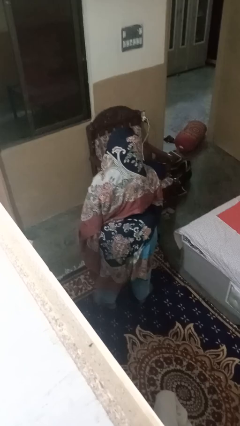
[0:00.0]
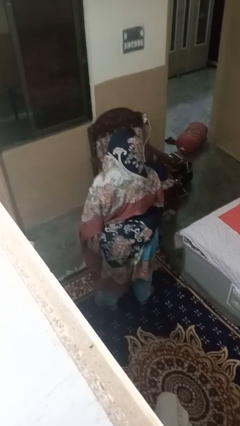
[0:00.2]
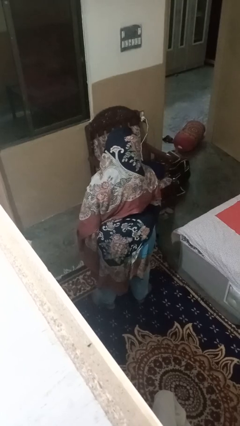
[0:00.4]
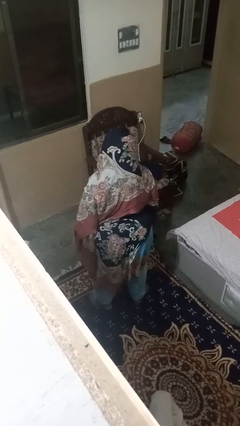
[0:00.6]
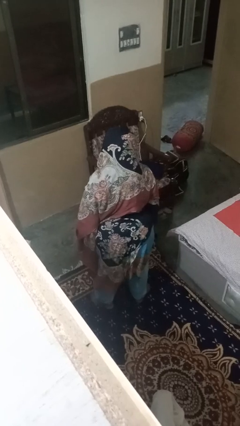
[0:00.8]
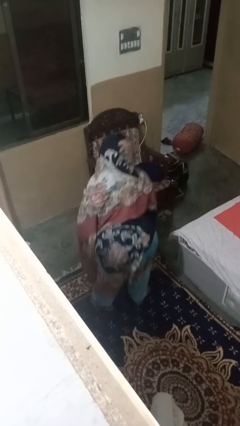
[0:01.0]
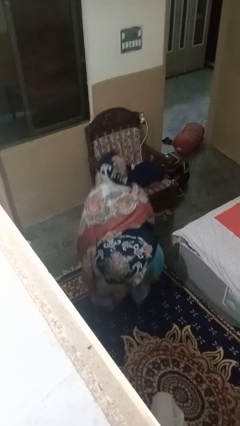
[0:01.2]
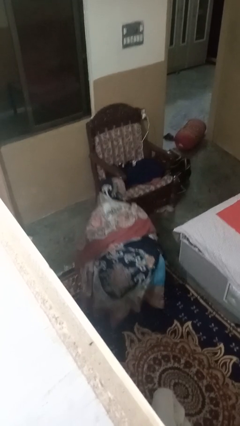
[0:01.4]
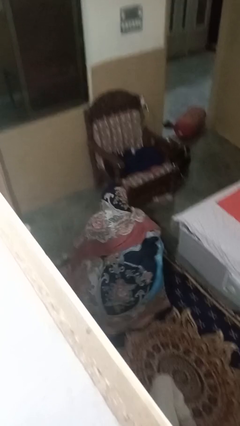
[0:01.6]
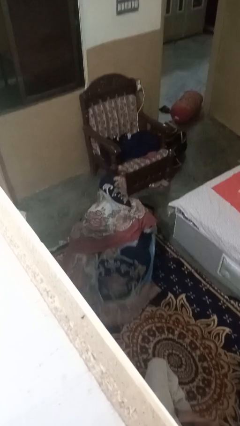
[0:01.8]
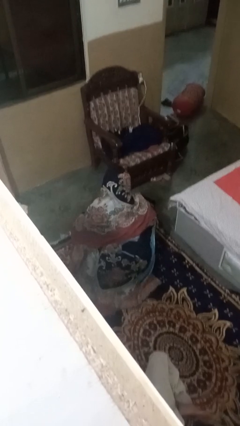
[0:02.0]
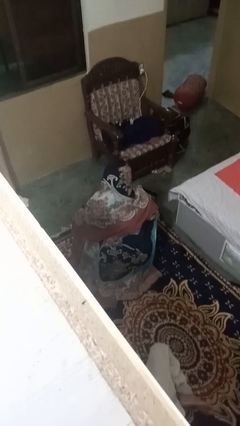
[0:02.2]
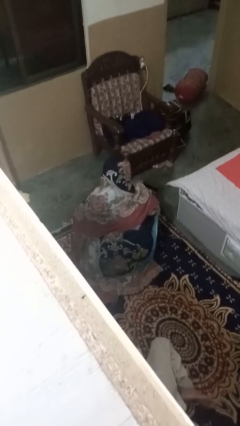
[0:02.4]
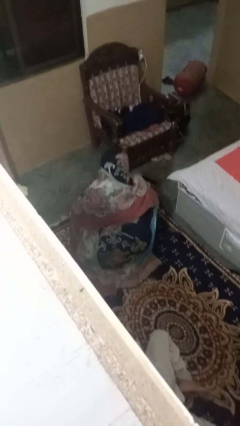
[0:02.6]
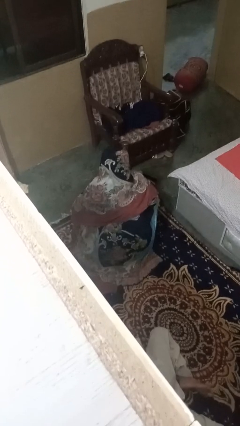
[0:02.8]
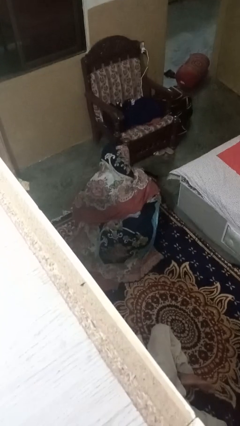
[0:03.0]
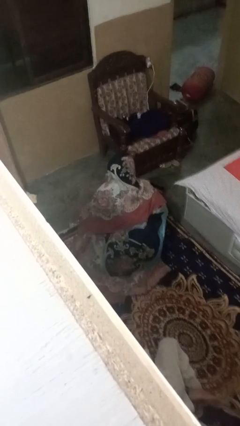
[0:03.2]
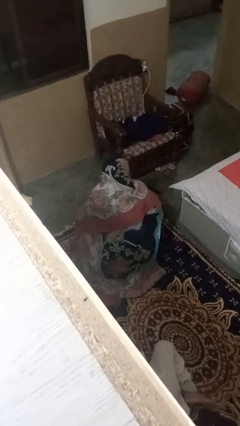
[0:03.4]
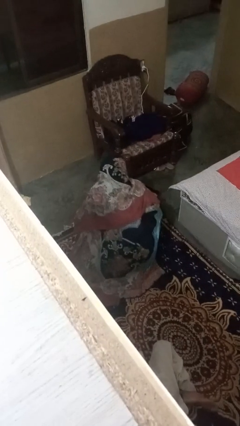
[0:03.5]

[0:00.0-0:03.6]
person squats

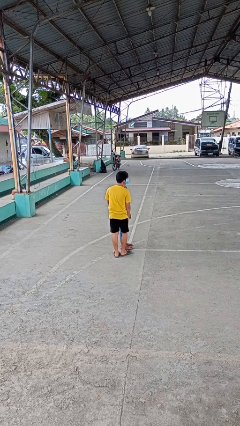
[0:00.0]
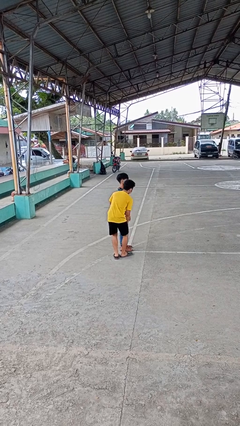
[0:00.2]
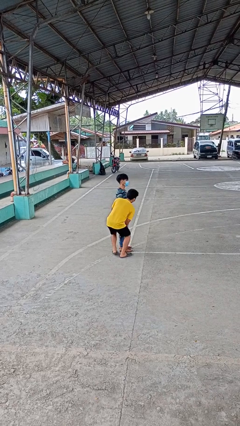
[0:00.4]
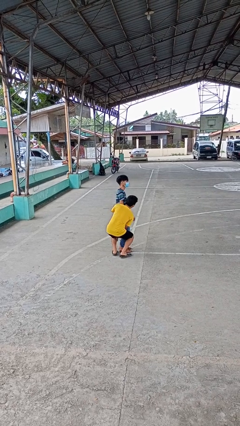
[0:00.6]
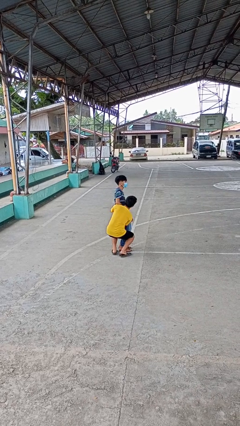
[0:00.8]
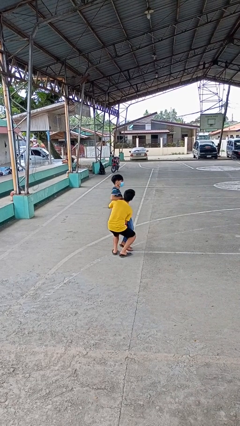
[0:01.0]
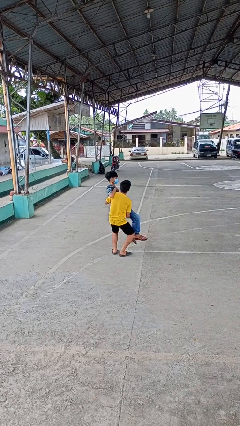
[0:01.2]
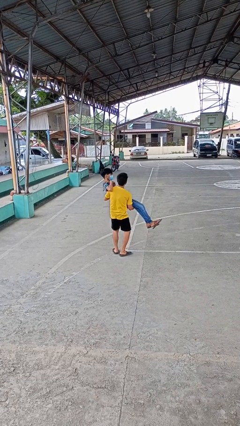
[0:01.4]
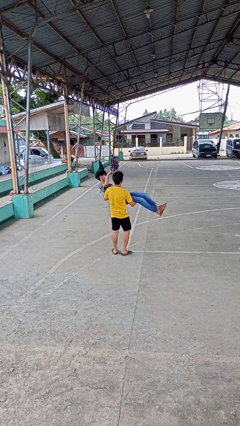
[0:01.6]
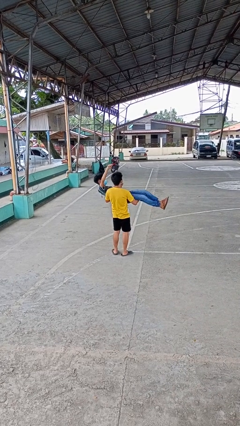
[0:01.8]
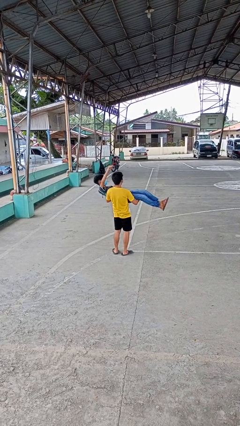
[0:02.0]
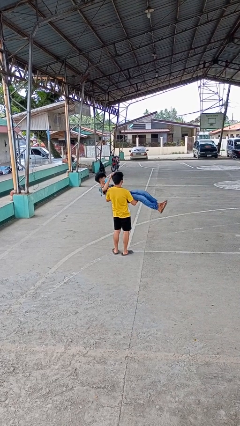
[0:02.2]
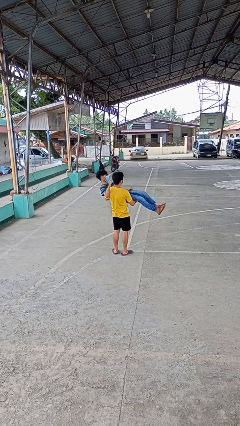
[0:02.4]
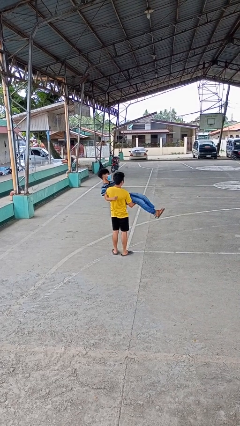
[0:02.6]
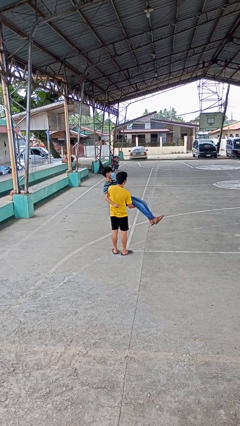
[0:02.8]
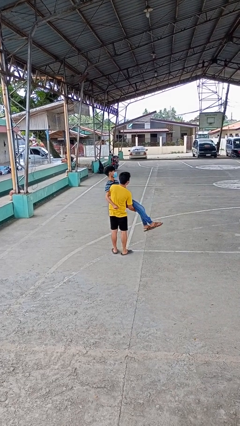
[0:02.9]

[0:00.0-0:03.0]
person picks up person

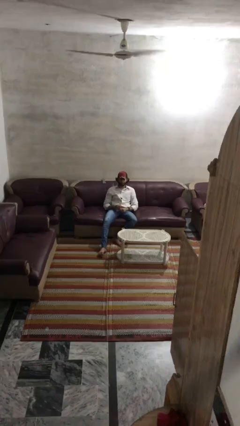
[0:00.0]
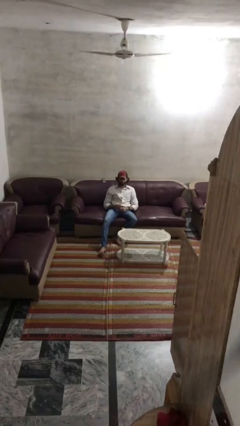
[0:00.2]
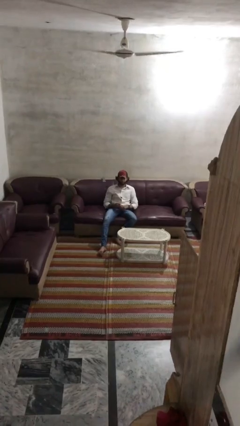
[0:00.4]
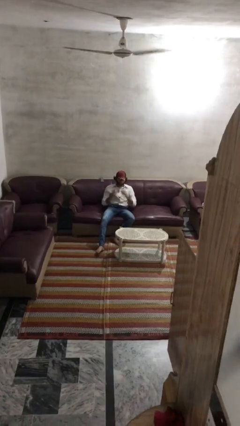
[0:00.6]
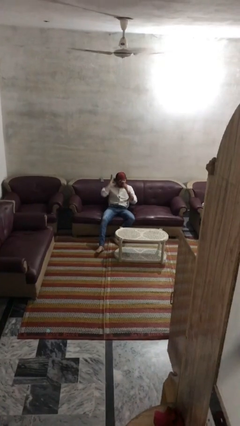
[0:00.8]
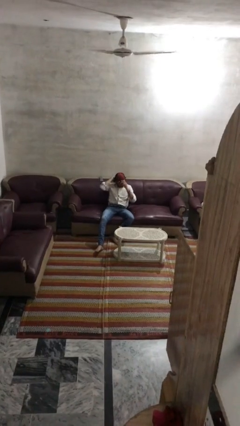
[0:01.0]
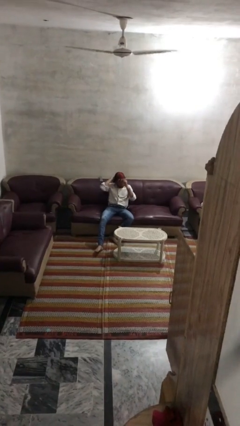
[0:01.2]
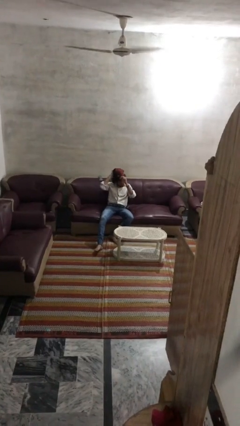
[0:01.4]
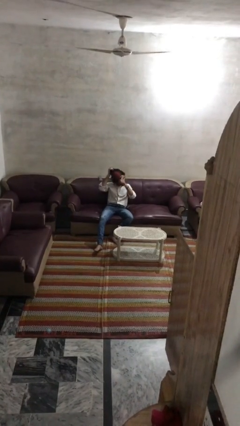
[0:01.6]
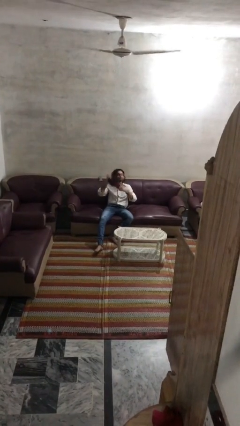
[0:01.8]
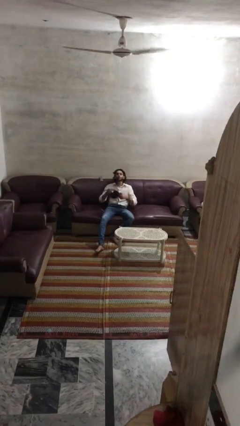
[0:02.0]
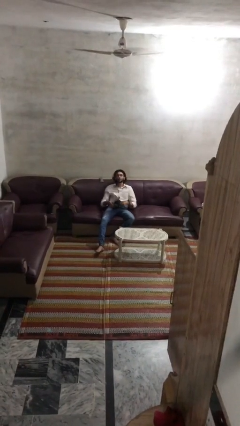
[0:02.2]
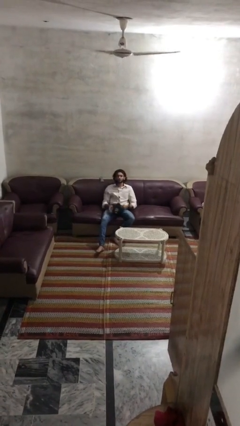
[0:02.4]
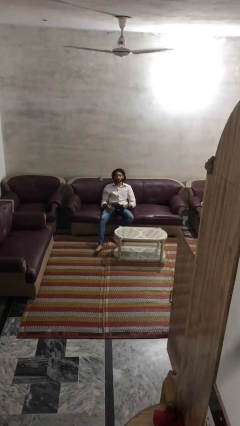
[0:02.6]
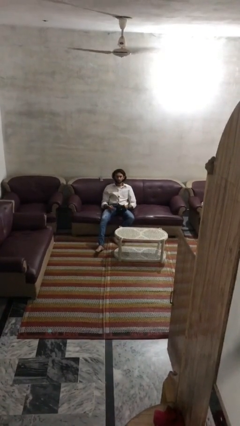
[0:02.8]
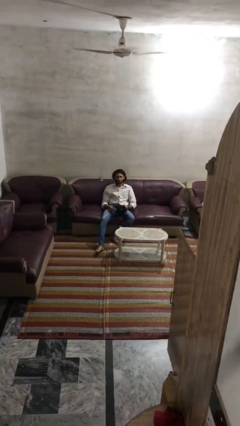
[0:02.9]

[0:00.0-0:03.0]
person takes off hat

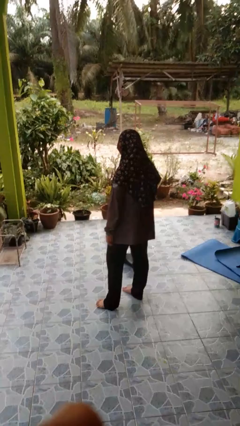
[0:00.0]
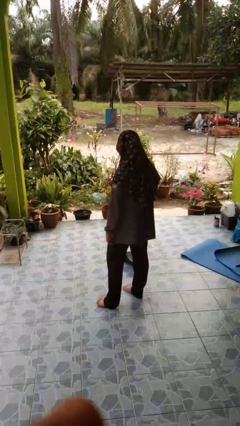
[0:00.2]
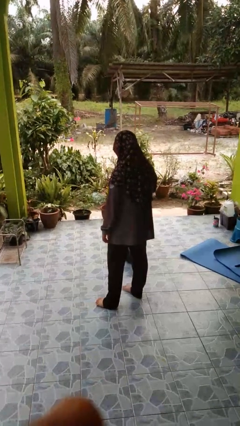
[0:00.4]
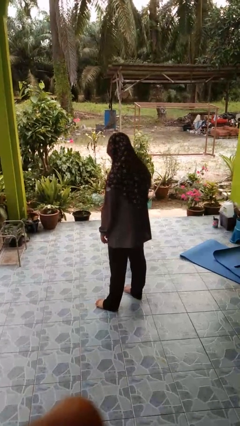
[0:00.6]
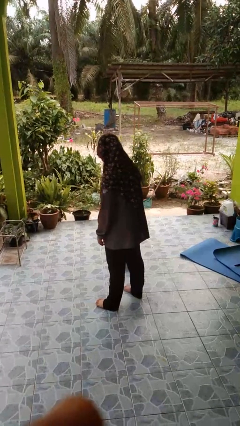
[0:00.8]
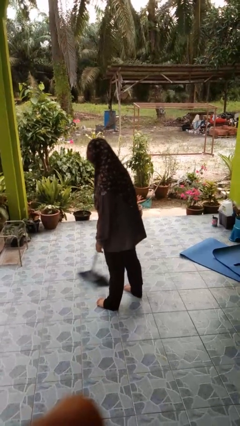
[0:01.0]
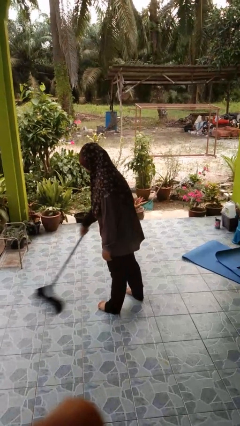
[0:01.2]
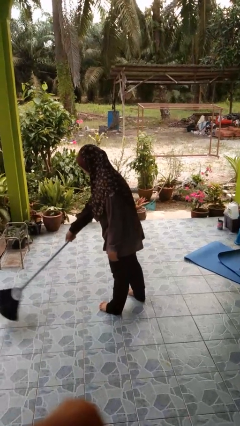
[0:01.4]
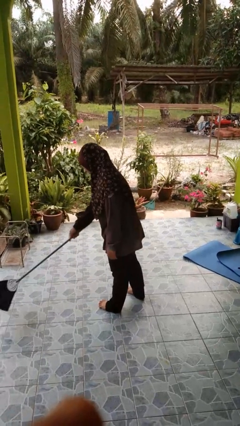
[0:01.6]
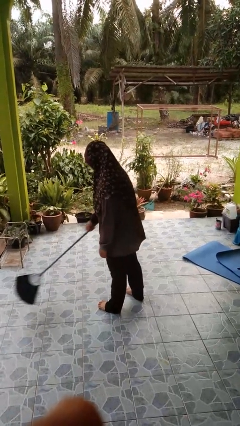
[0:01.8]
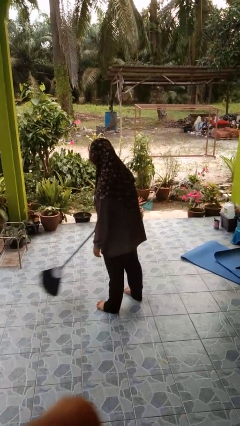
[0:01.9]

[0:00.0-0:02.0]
person sweeps floor

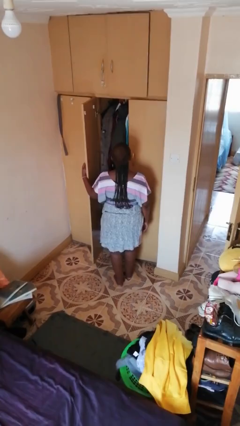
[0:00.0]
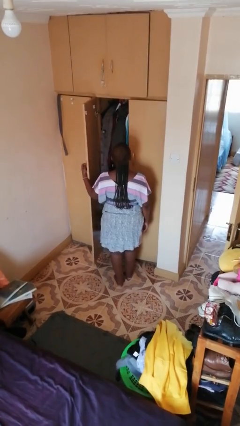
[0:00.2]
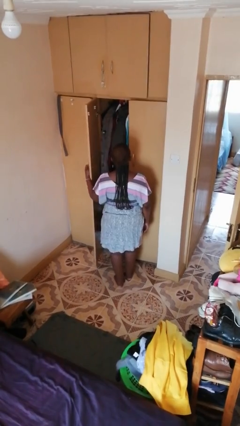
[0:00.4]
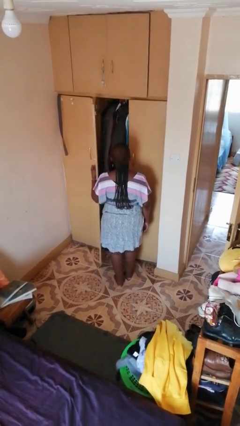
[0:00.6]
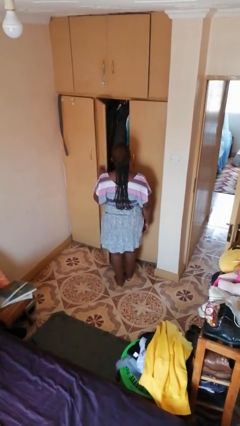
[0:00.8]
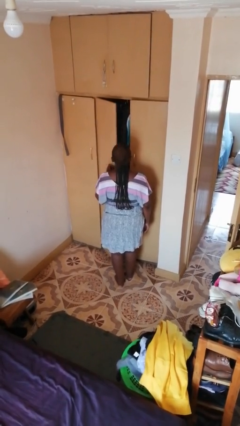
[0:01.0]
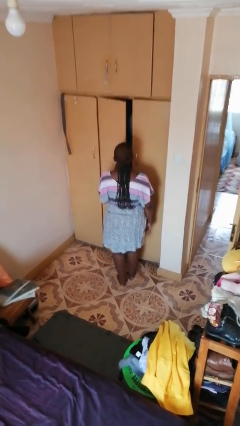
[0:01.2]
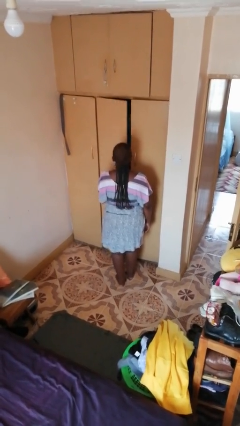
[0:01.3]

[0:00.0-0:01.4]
person closes closet door

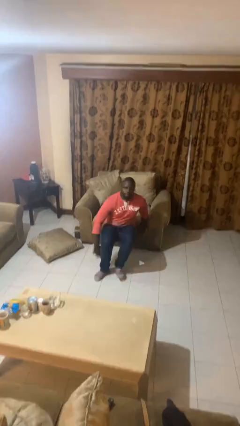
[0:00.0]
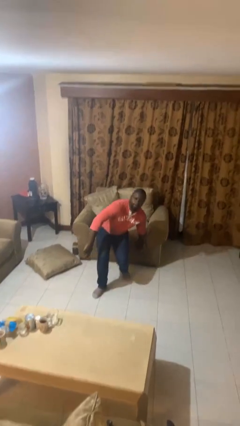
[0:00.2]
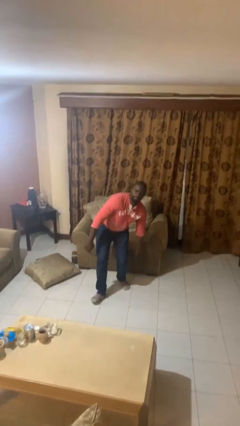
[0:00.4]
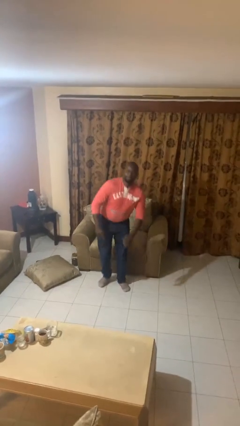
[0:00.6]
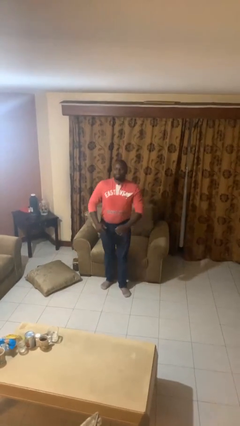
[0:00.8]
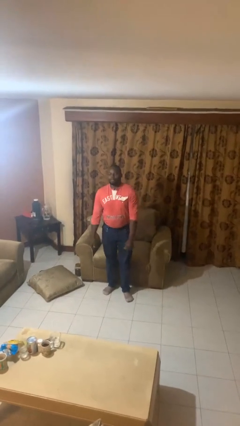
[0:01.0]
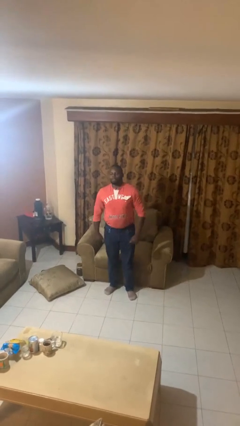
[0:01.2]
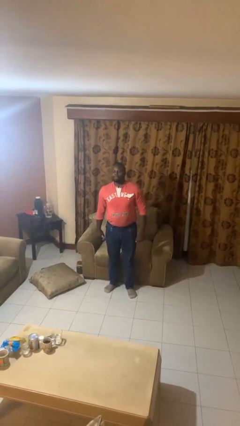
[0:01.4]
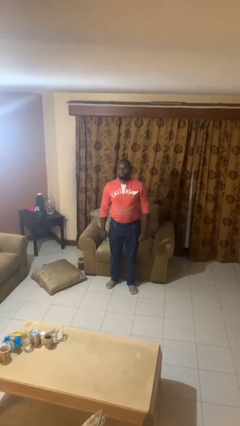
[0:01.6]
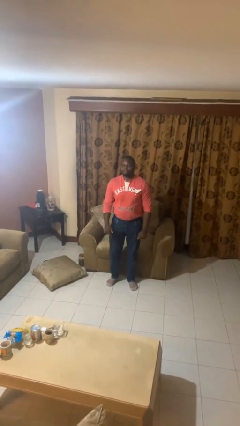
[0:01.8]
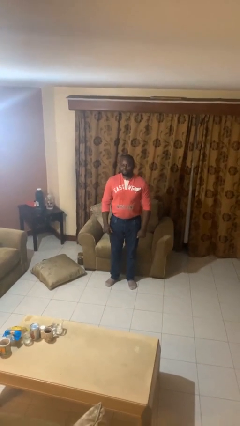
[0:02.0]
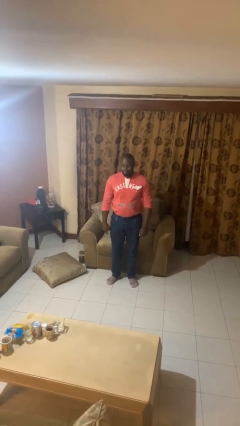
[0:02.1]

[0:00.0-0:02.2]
person stands up from floor

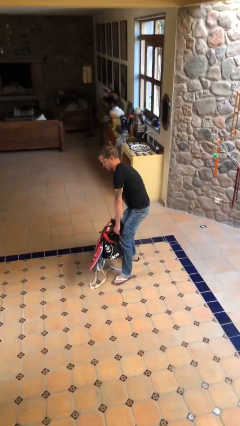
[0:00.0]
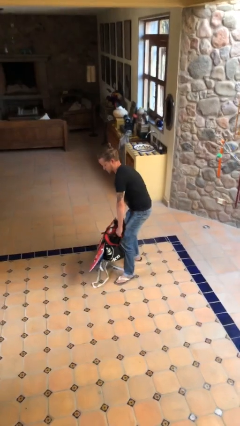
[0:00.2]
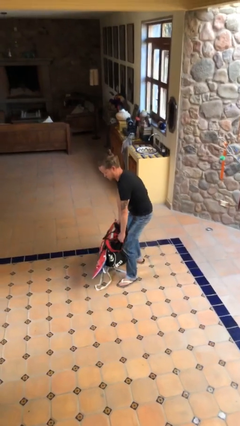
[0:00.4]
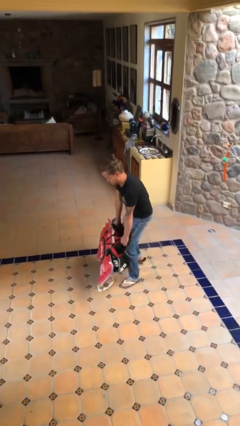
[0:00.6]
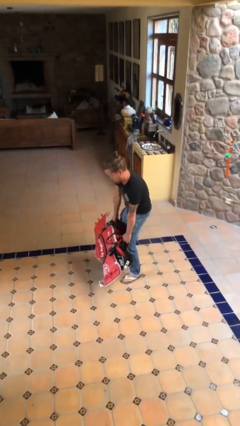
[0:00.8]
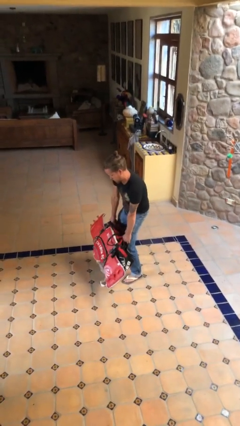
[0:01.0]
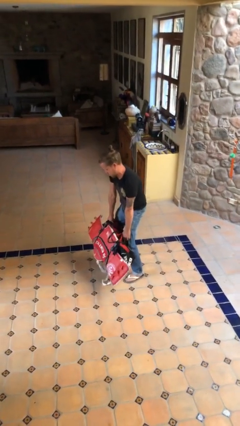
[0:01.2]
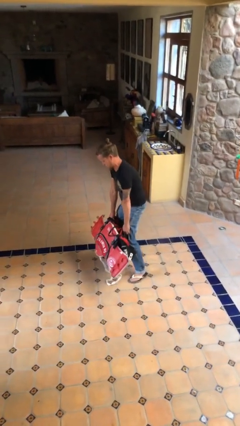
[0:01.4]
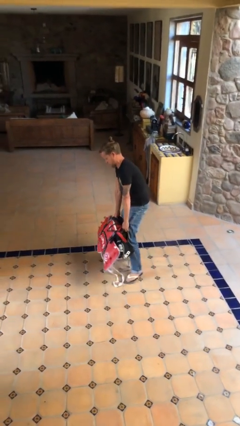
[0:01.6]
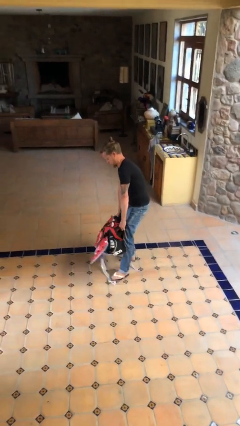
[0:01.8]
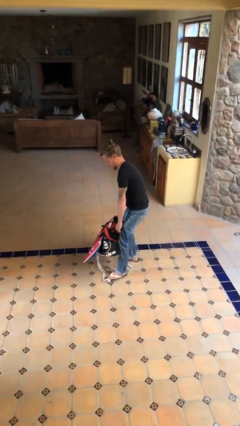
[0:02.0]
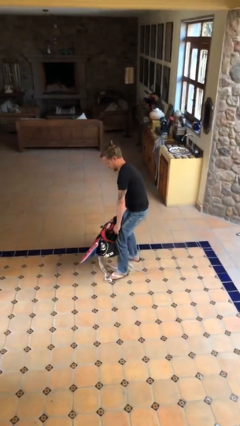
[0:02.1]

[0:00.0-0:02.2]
person carries heavy object
